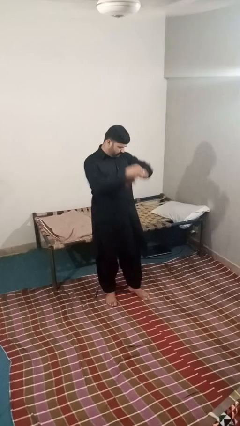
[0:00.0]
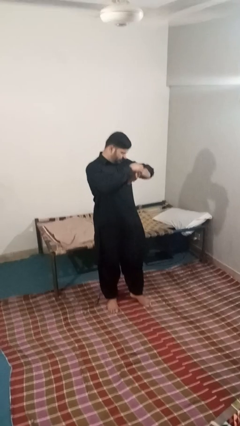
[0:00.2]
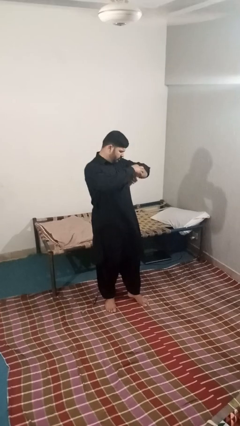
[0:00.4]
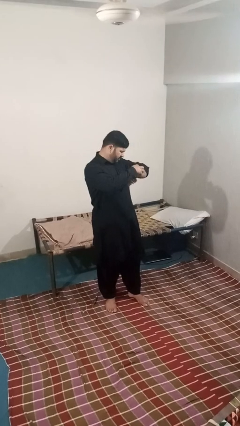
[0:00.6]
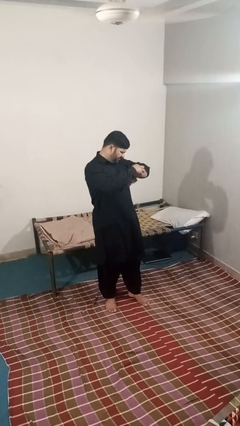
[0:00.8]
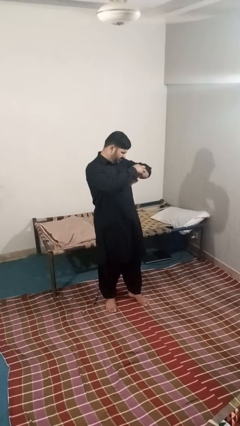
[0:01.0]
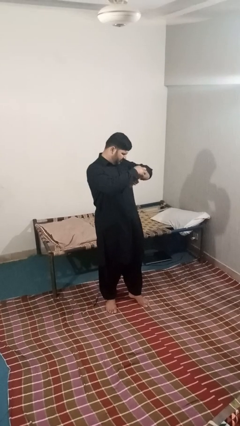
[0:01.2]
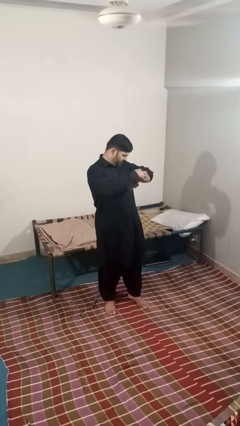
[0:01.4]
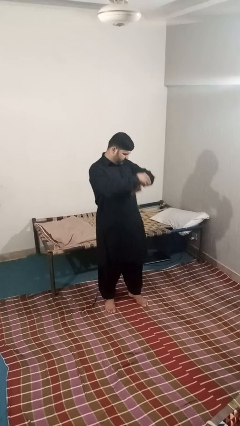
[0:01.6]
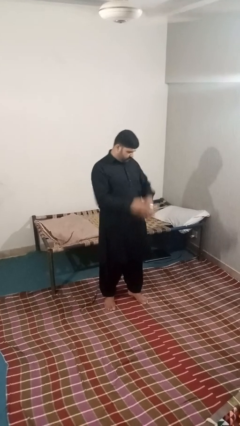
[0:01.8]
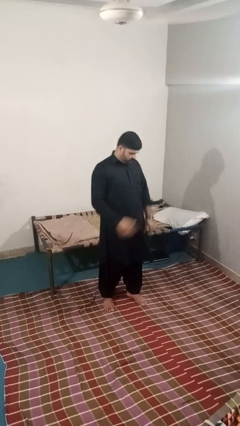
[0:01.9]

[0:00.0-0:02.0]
person looks at wristwatch

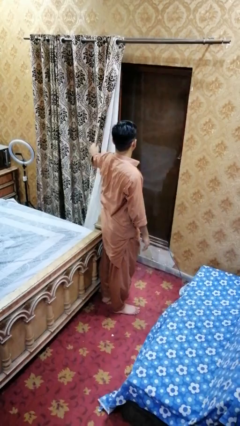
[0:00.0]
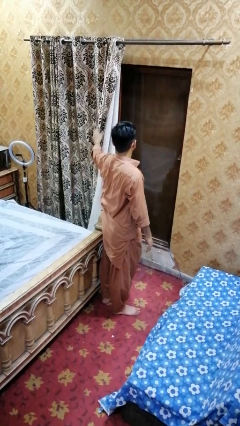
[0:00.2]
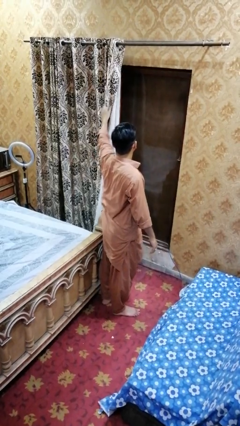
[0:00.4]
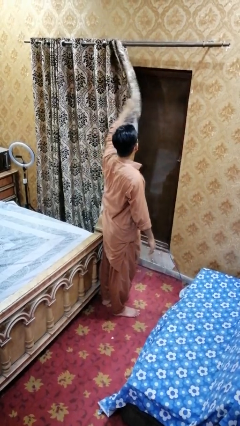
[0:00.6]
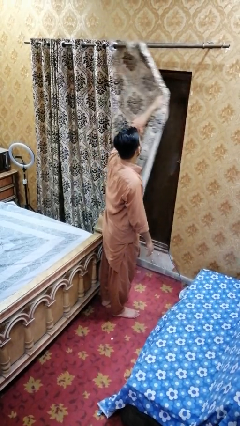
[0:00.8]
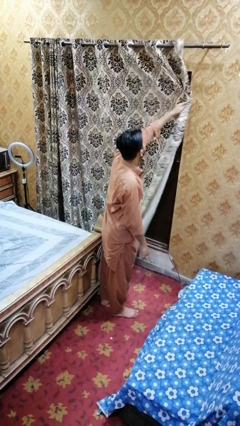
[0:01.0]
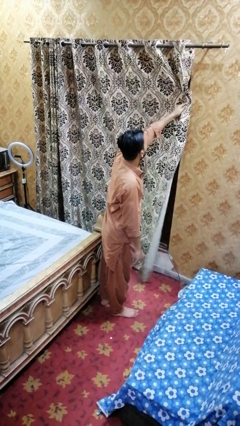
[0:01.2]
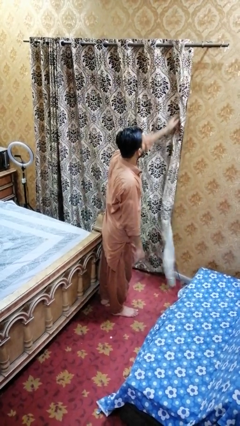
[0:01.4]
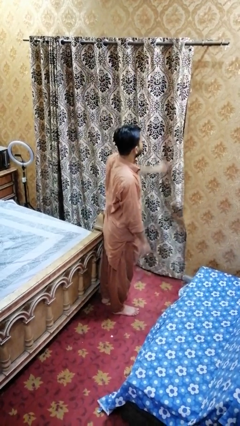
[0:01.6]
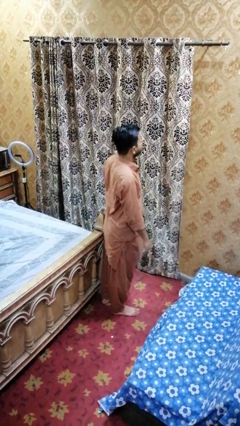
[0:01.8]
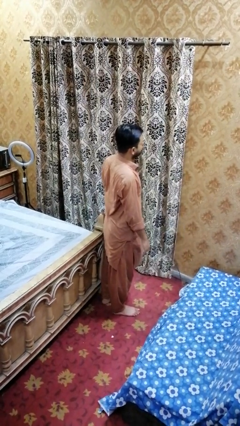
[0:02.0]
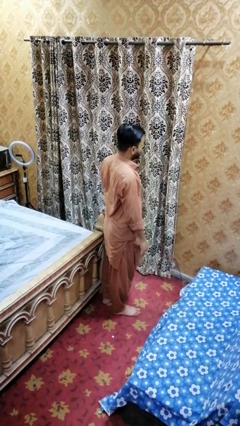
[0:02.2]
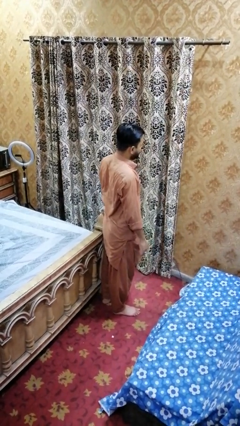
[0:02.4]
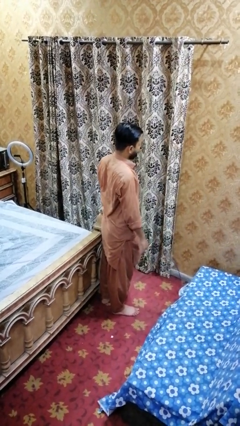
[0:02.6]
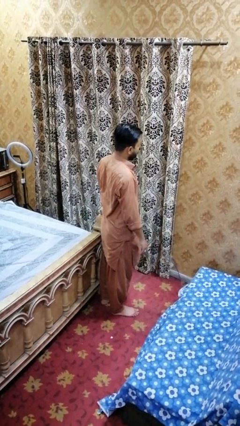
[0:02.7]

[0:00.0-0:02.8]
person closes curtains

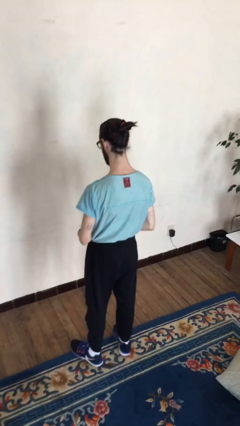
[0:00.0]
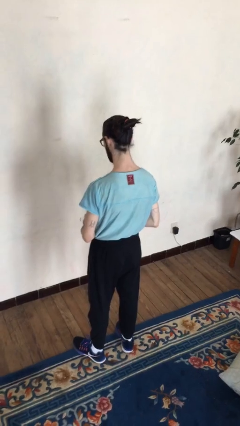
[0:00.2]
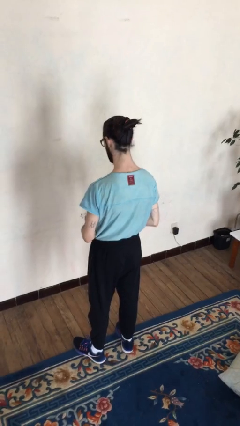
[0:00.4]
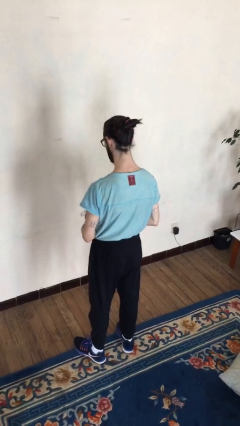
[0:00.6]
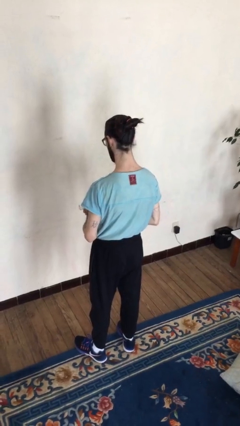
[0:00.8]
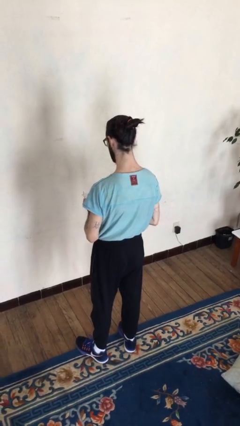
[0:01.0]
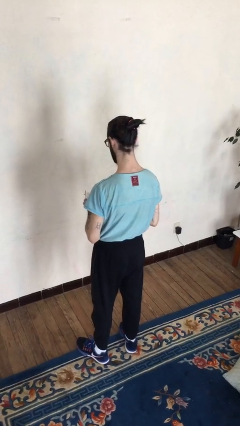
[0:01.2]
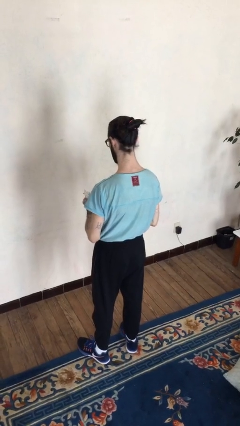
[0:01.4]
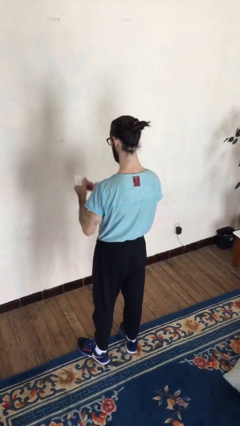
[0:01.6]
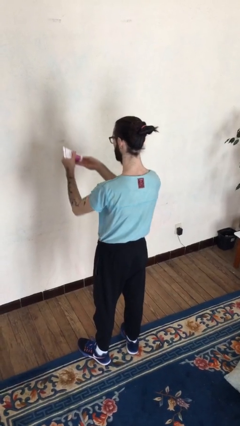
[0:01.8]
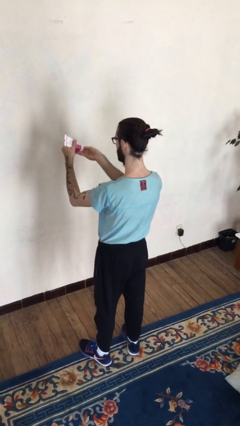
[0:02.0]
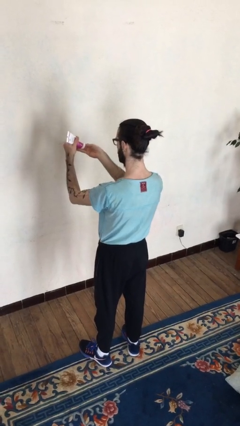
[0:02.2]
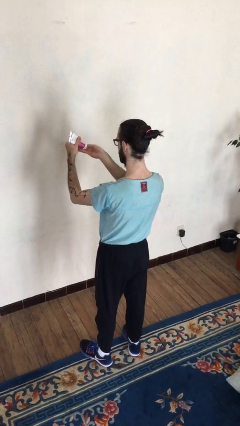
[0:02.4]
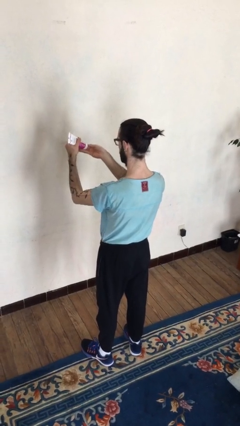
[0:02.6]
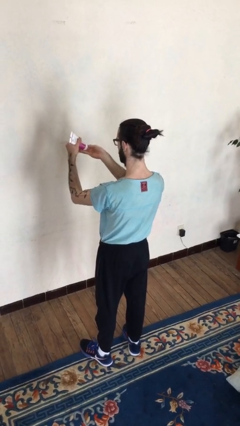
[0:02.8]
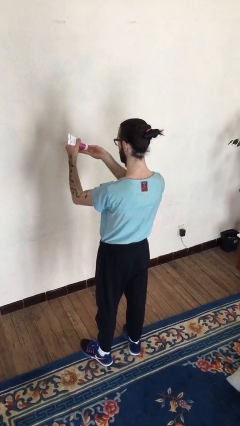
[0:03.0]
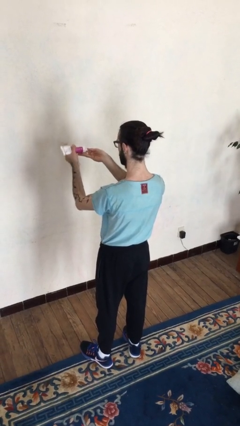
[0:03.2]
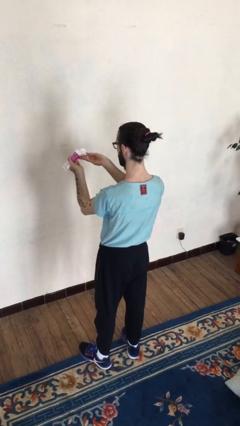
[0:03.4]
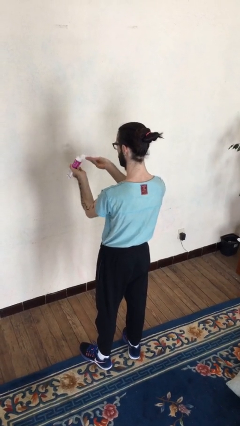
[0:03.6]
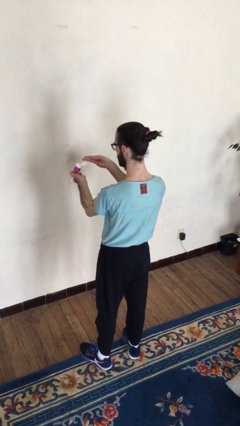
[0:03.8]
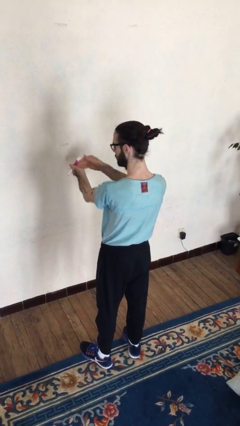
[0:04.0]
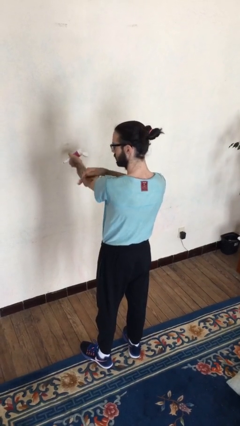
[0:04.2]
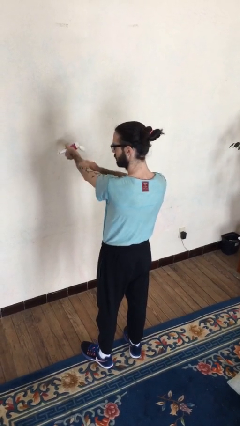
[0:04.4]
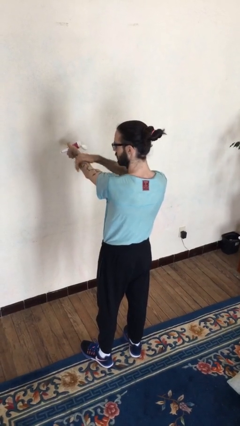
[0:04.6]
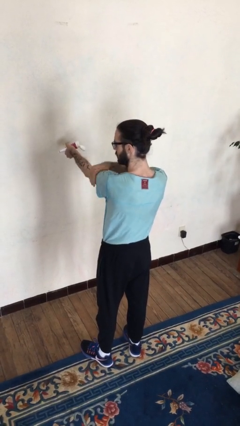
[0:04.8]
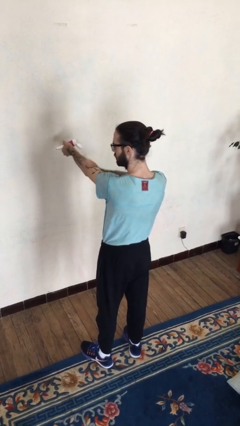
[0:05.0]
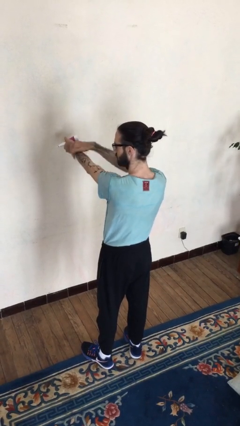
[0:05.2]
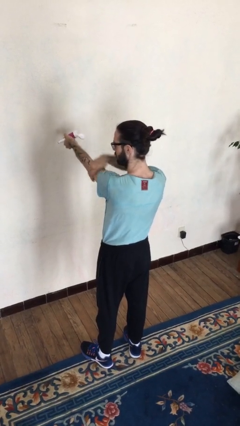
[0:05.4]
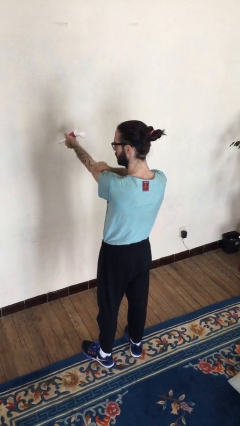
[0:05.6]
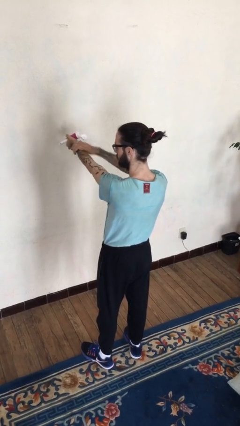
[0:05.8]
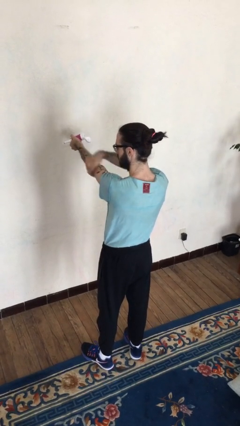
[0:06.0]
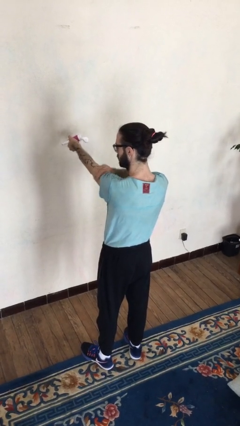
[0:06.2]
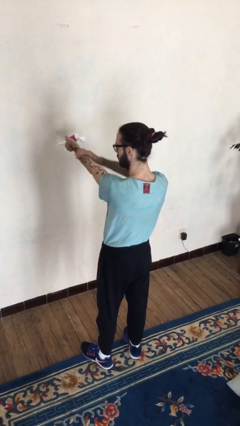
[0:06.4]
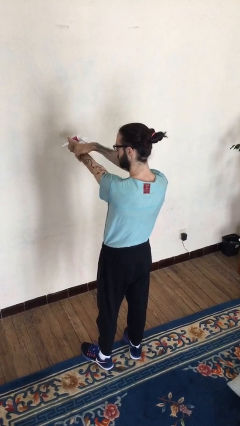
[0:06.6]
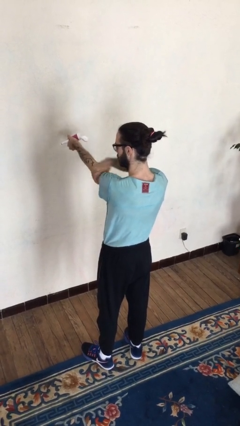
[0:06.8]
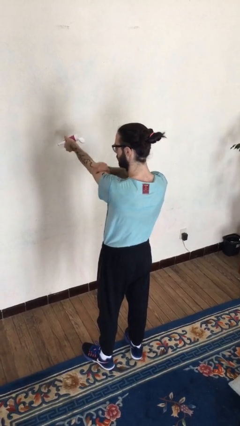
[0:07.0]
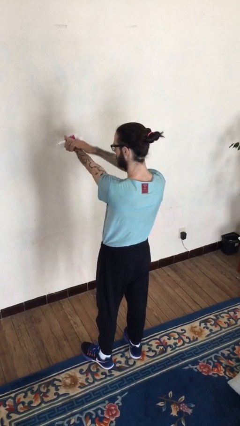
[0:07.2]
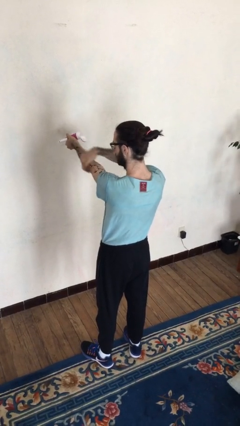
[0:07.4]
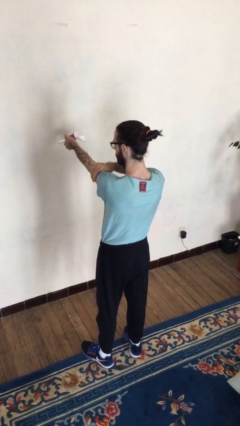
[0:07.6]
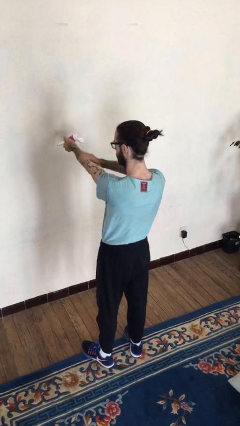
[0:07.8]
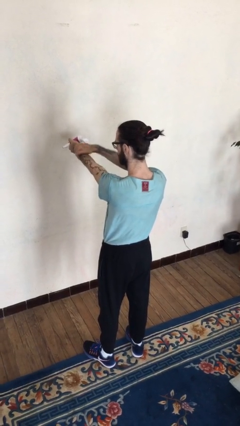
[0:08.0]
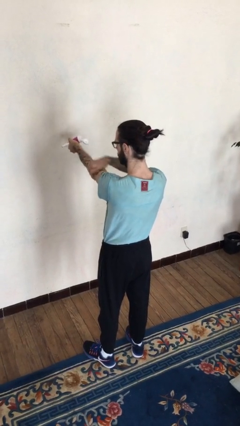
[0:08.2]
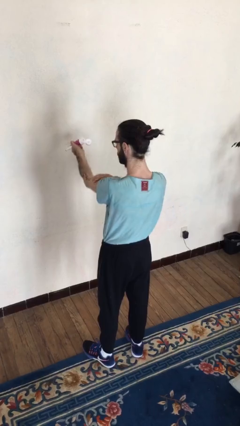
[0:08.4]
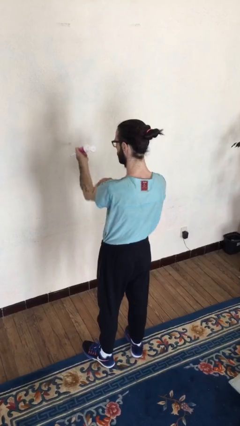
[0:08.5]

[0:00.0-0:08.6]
person applies sunscreen

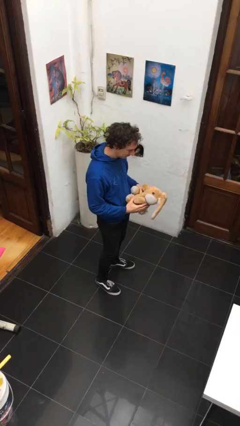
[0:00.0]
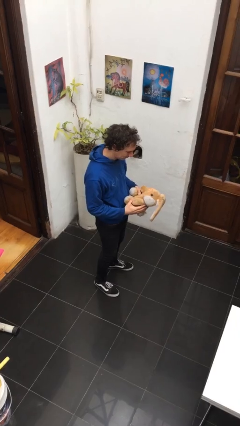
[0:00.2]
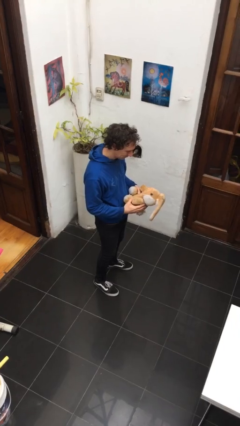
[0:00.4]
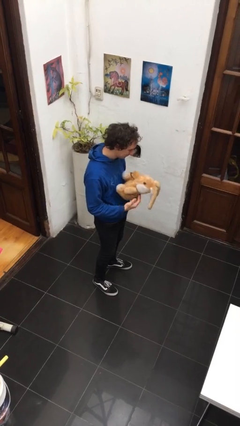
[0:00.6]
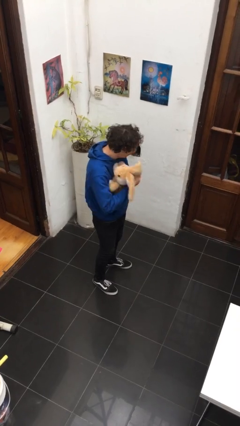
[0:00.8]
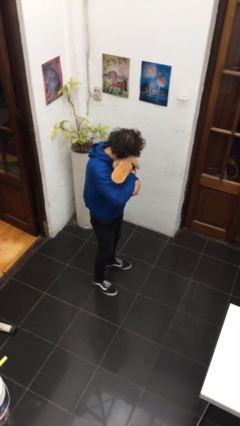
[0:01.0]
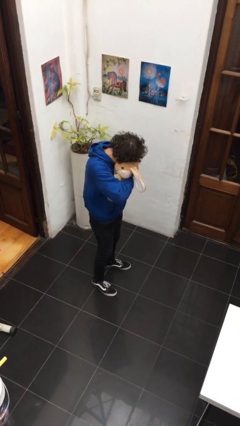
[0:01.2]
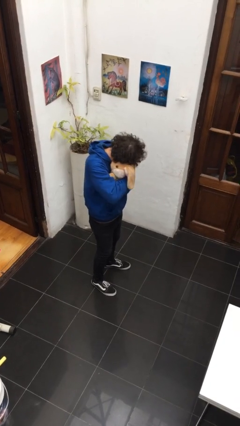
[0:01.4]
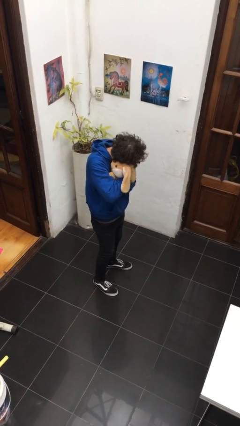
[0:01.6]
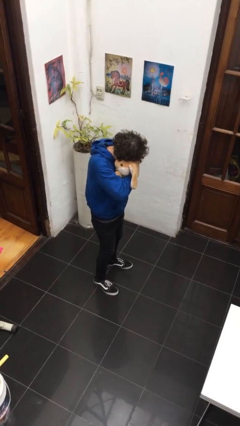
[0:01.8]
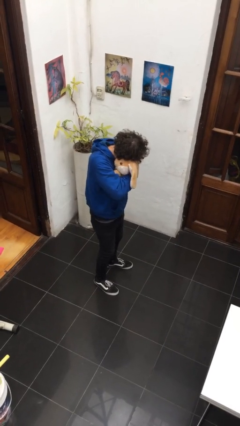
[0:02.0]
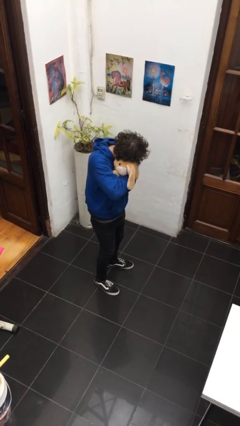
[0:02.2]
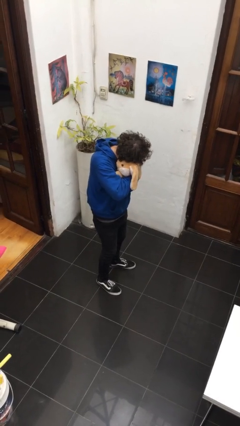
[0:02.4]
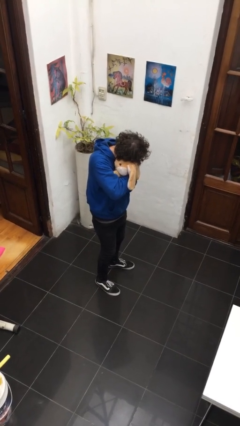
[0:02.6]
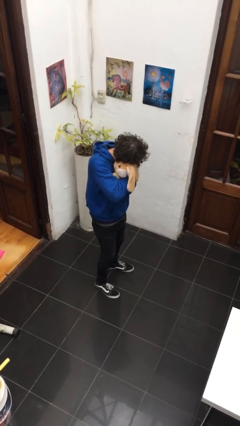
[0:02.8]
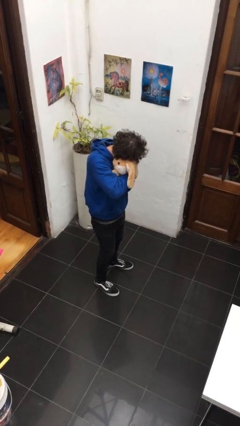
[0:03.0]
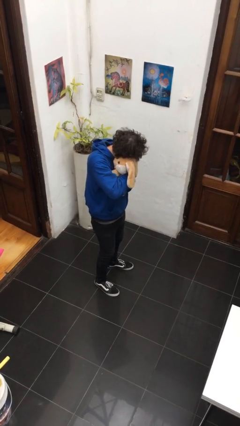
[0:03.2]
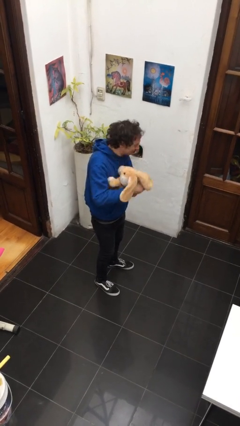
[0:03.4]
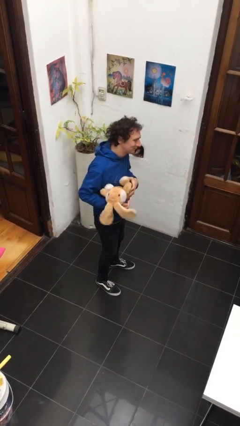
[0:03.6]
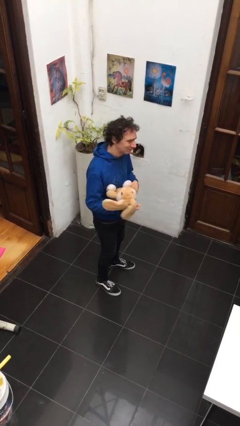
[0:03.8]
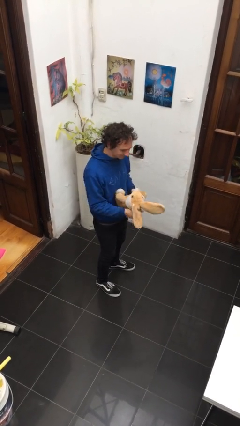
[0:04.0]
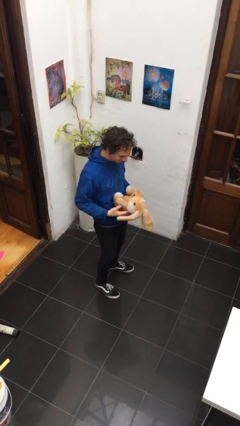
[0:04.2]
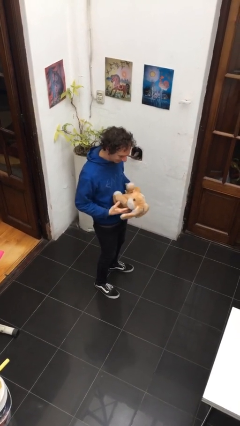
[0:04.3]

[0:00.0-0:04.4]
person hugs stuffed animal
